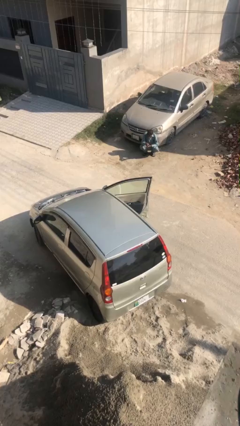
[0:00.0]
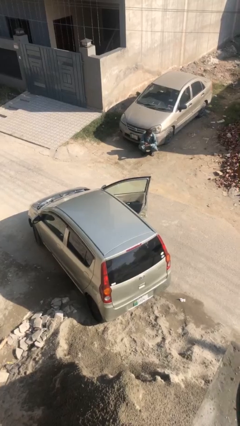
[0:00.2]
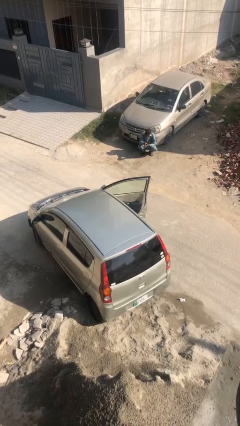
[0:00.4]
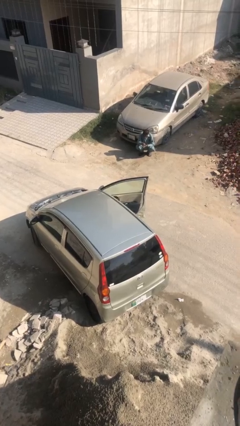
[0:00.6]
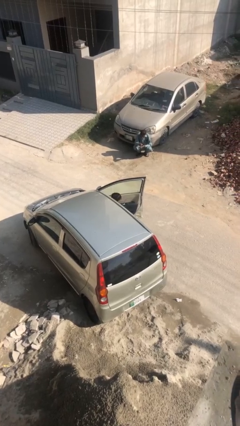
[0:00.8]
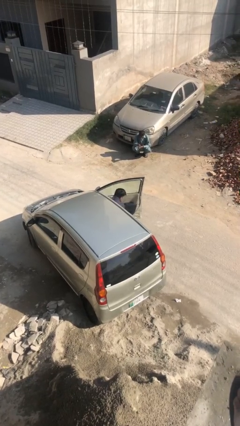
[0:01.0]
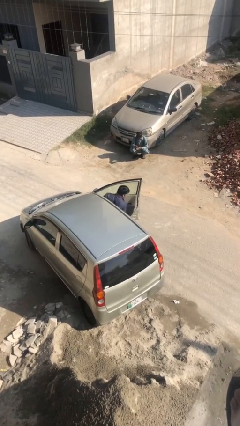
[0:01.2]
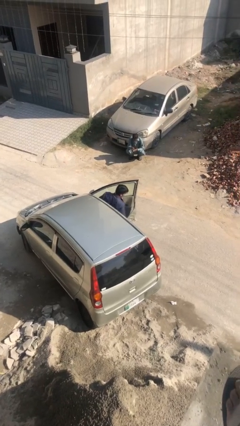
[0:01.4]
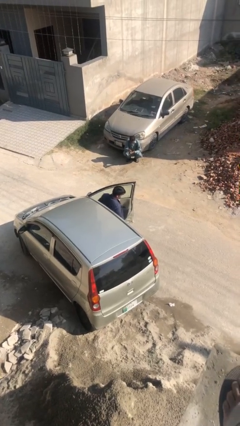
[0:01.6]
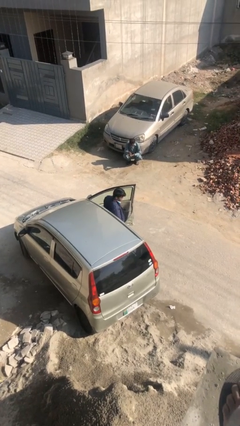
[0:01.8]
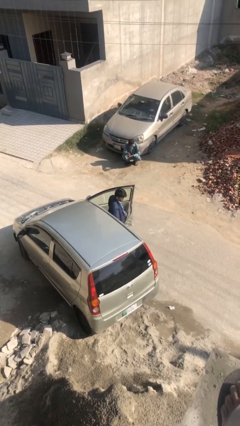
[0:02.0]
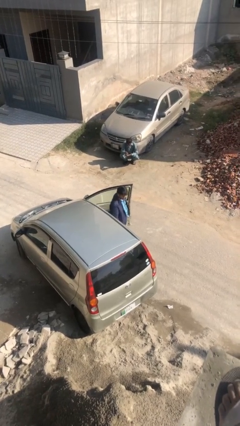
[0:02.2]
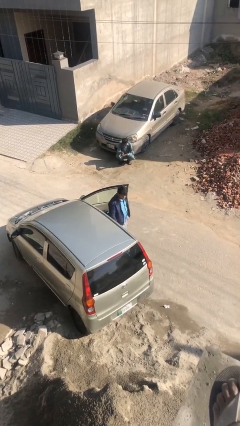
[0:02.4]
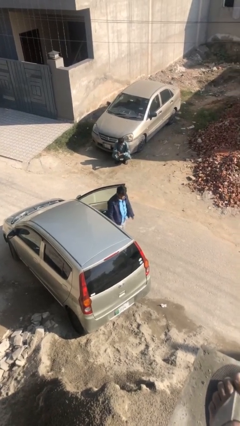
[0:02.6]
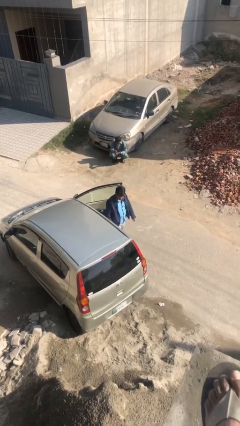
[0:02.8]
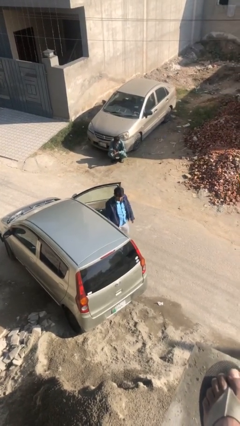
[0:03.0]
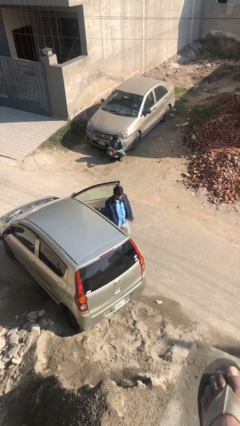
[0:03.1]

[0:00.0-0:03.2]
person exits car

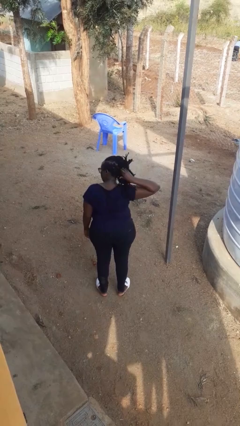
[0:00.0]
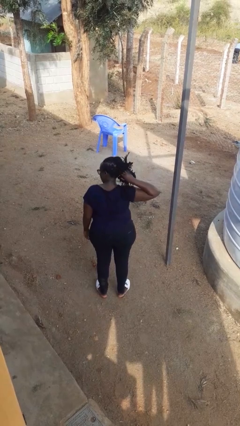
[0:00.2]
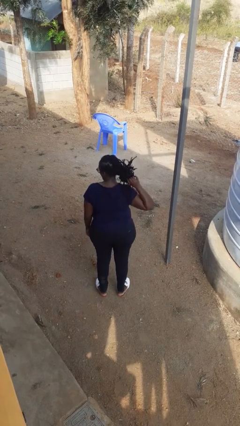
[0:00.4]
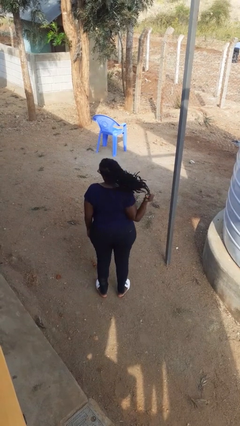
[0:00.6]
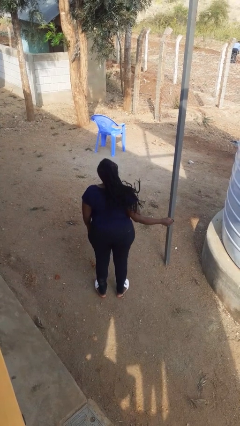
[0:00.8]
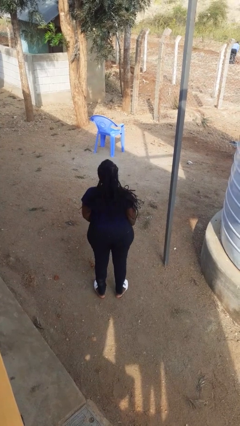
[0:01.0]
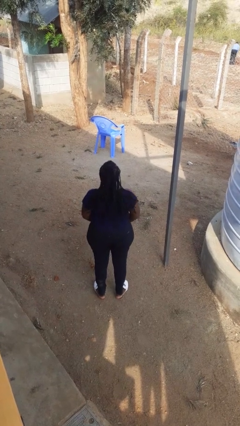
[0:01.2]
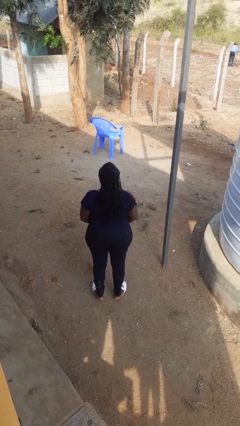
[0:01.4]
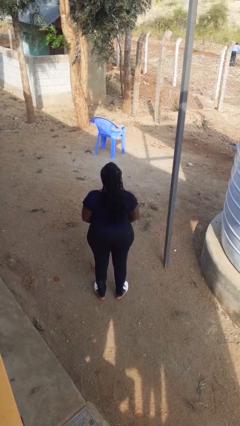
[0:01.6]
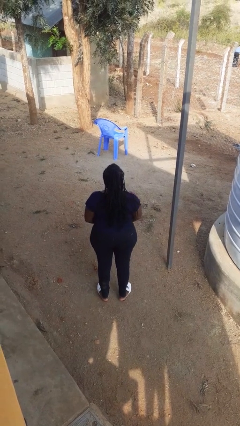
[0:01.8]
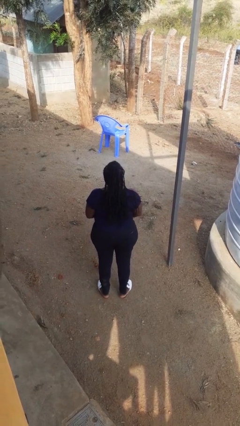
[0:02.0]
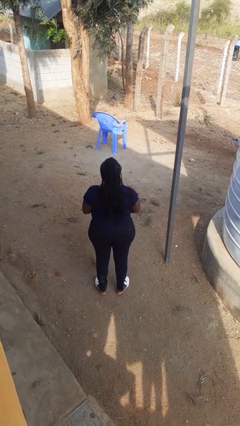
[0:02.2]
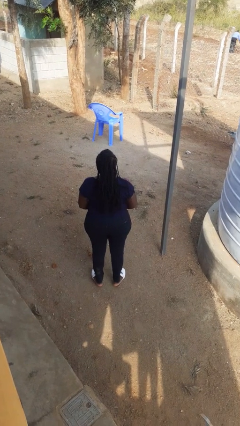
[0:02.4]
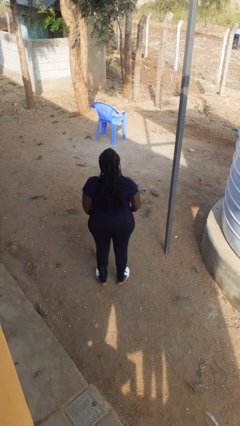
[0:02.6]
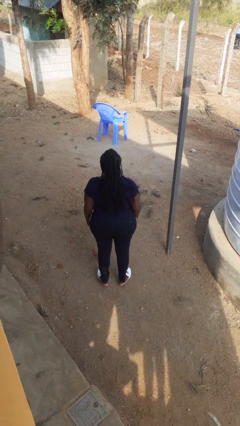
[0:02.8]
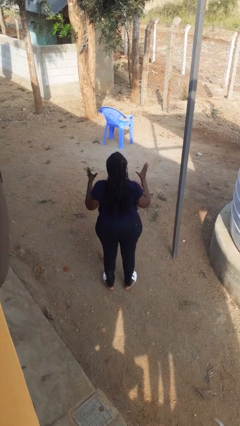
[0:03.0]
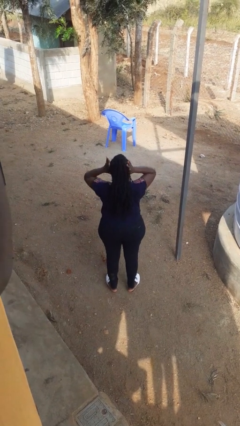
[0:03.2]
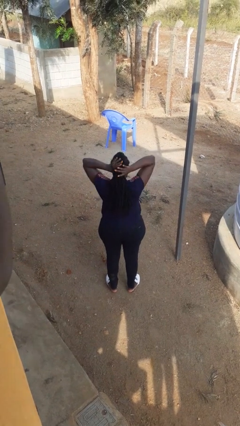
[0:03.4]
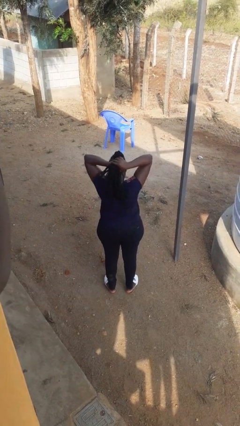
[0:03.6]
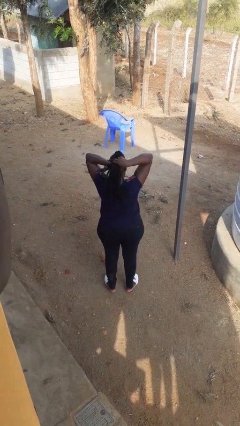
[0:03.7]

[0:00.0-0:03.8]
person takes off hairtie

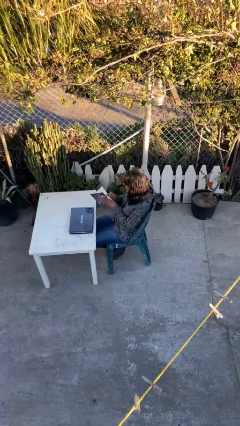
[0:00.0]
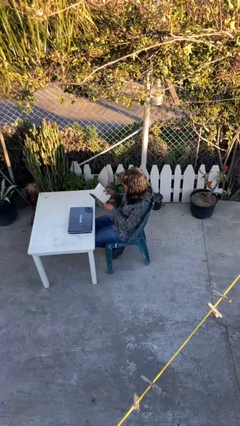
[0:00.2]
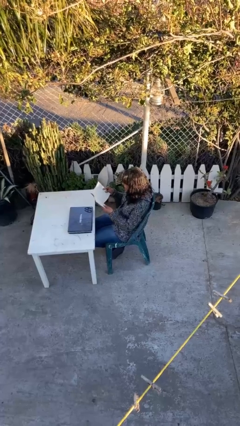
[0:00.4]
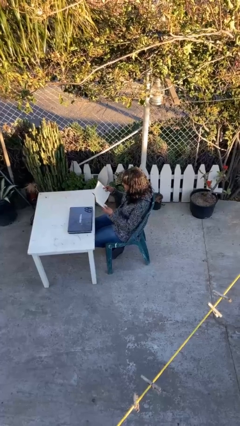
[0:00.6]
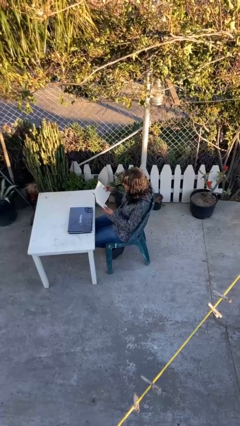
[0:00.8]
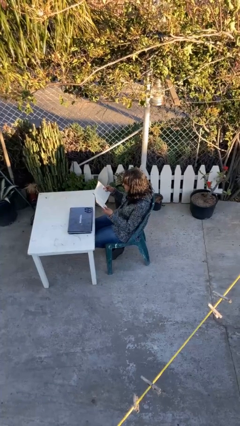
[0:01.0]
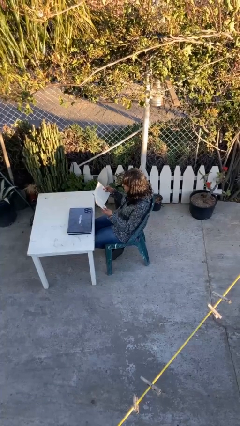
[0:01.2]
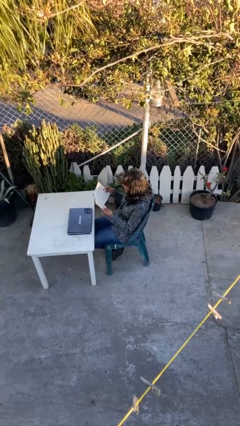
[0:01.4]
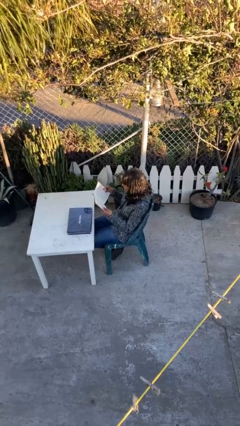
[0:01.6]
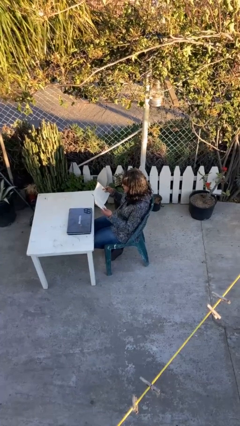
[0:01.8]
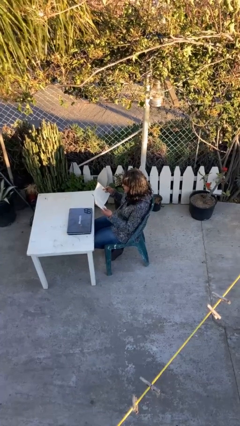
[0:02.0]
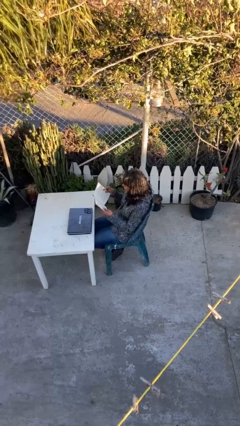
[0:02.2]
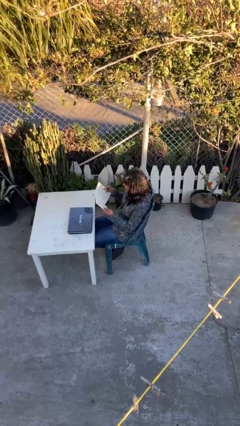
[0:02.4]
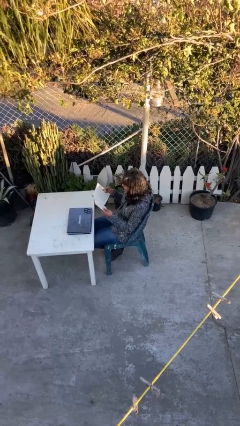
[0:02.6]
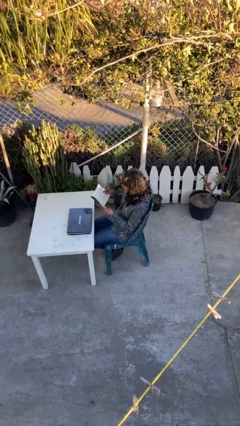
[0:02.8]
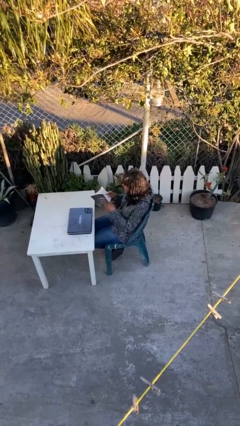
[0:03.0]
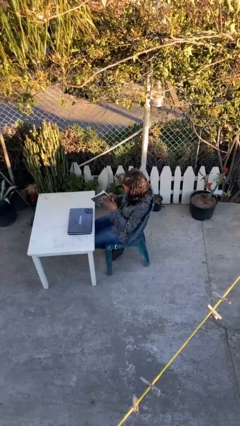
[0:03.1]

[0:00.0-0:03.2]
person reads document

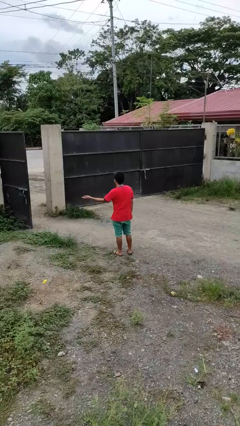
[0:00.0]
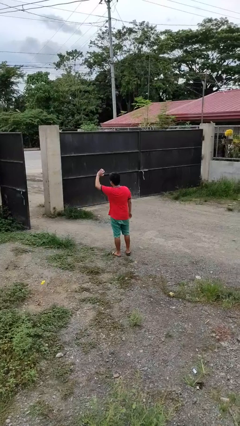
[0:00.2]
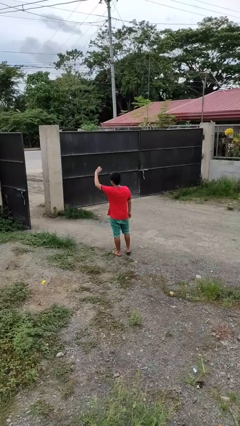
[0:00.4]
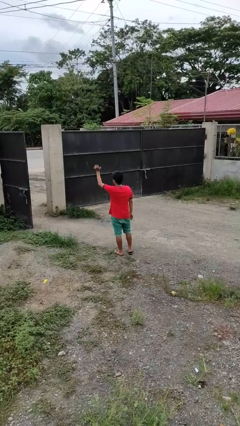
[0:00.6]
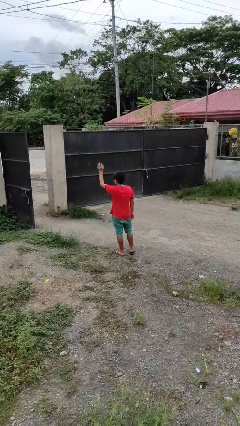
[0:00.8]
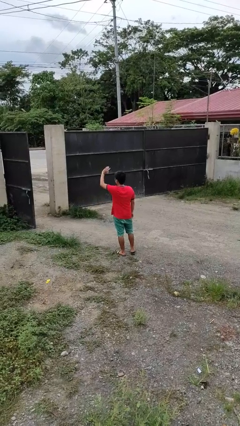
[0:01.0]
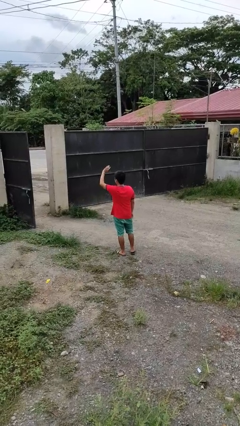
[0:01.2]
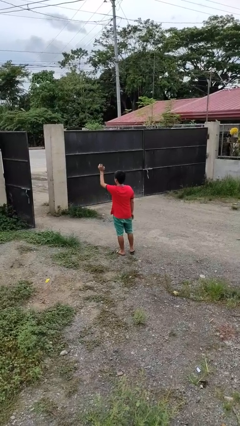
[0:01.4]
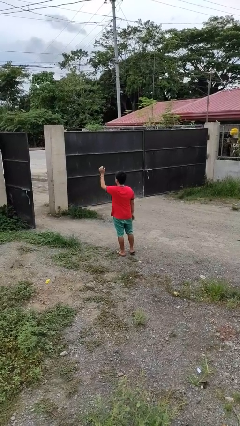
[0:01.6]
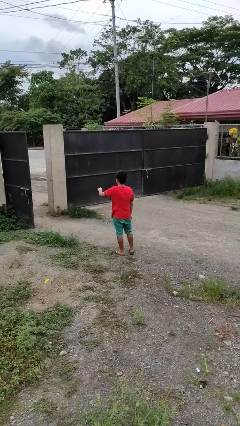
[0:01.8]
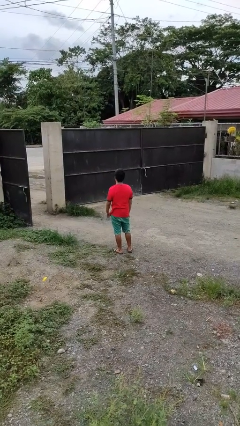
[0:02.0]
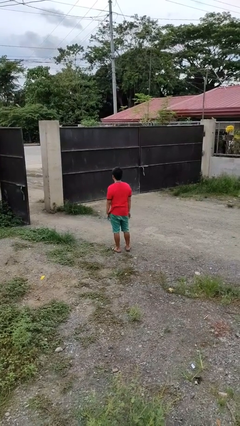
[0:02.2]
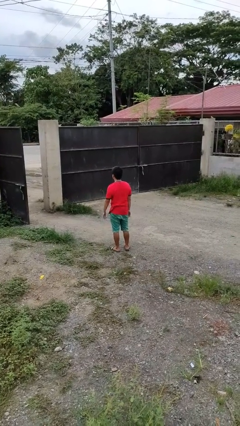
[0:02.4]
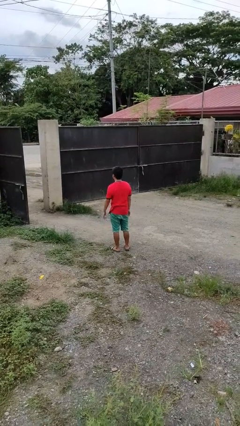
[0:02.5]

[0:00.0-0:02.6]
person waves at person

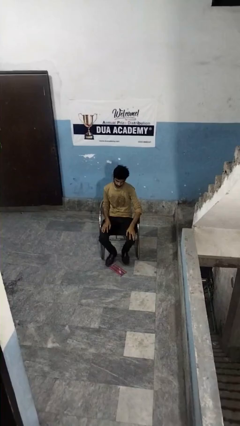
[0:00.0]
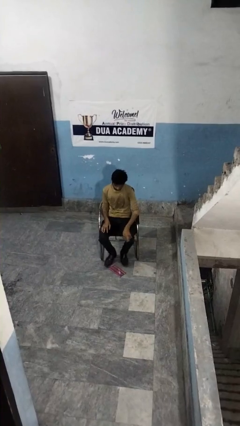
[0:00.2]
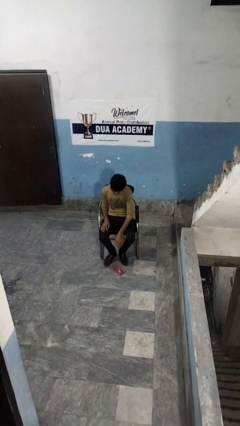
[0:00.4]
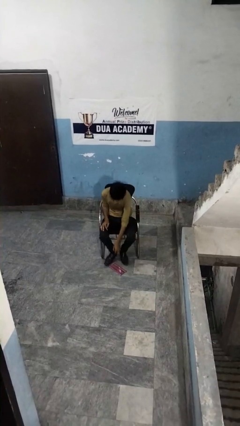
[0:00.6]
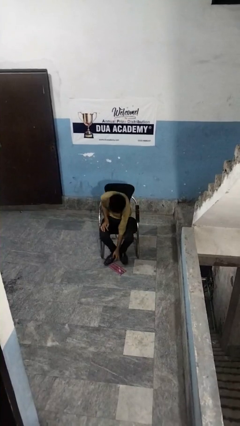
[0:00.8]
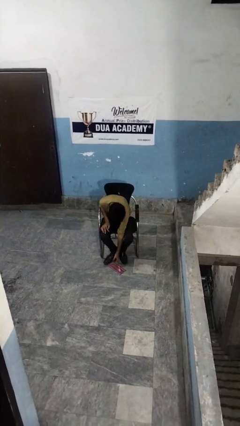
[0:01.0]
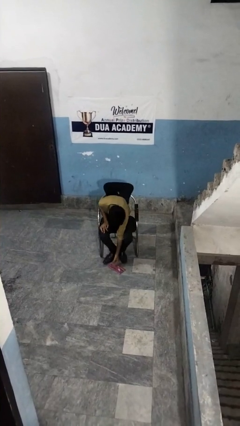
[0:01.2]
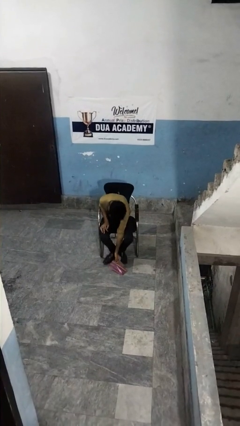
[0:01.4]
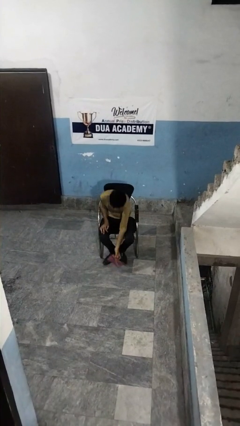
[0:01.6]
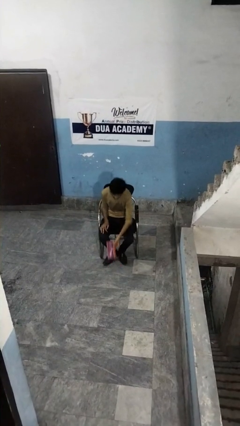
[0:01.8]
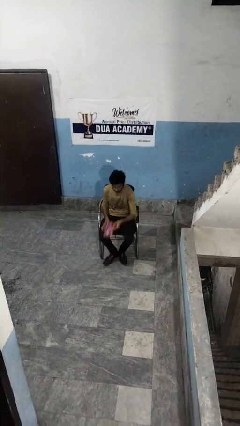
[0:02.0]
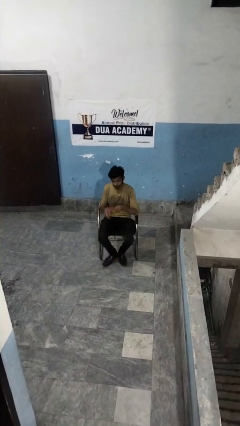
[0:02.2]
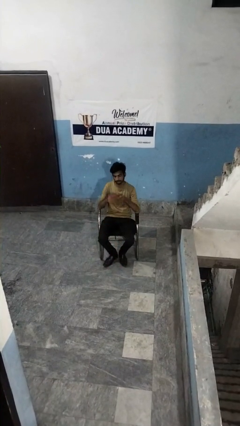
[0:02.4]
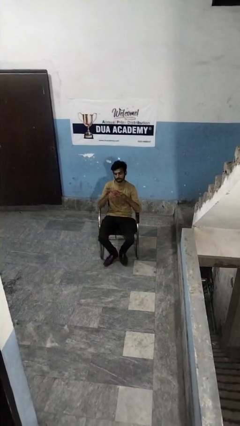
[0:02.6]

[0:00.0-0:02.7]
person picks up object from floor

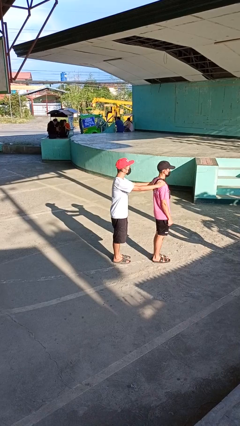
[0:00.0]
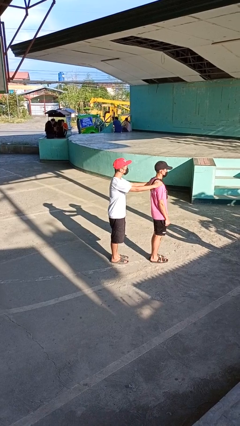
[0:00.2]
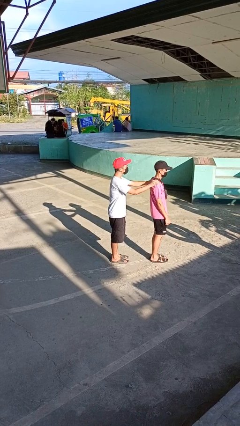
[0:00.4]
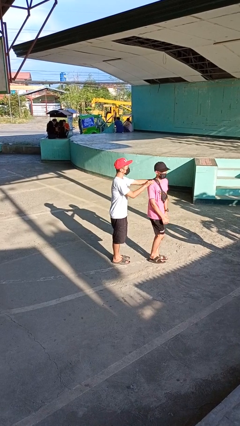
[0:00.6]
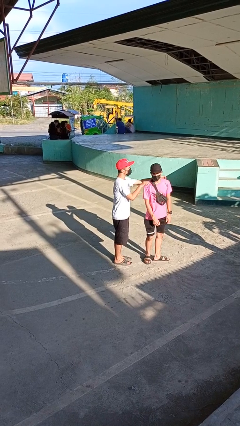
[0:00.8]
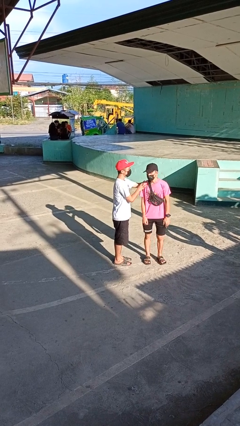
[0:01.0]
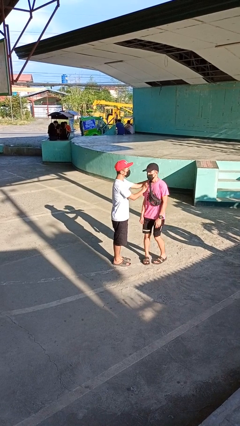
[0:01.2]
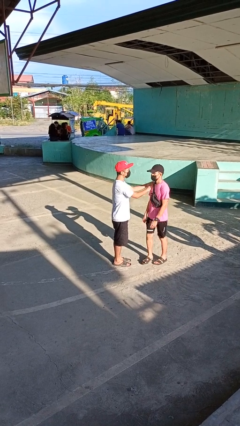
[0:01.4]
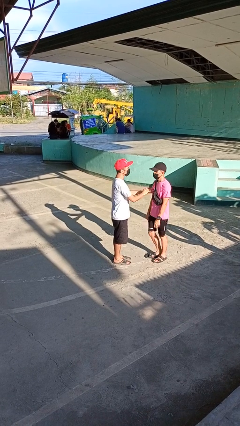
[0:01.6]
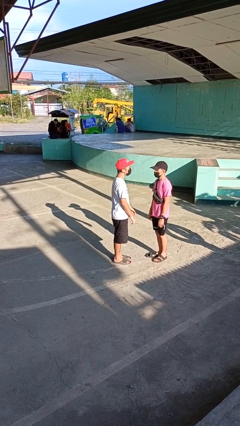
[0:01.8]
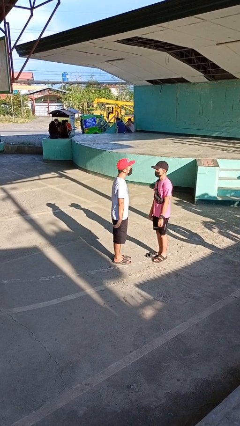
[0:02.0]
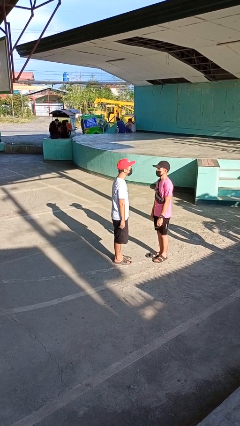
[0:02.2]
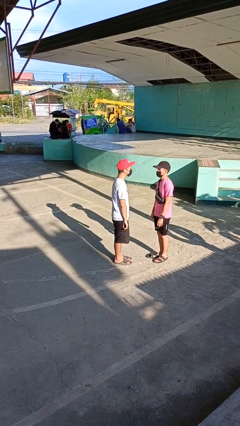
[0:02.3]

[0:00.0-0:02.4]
person spins person around
